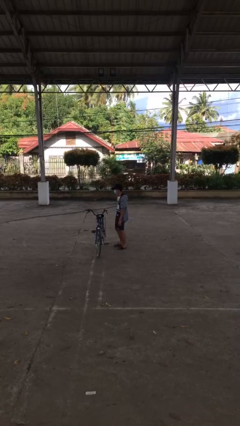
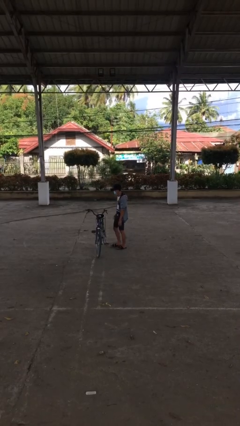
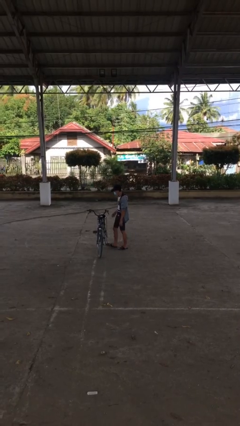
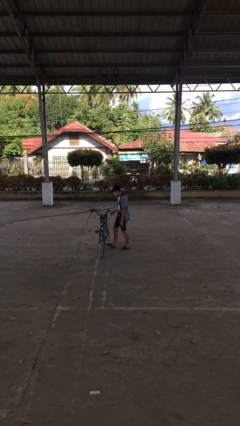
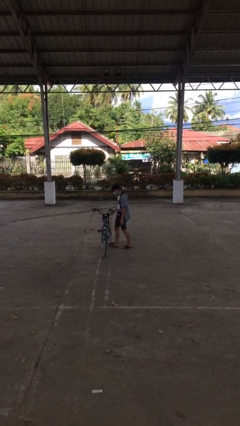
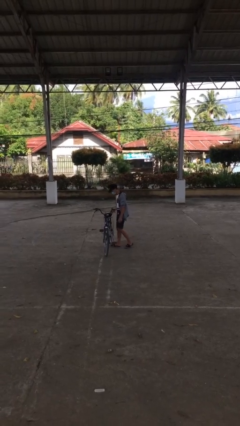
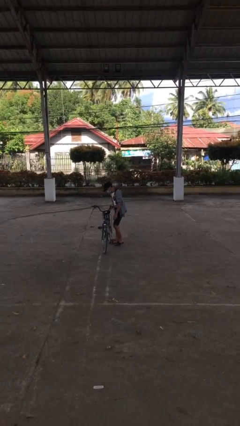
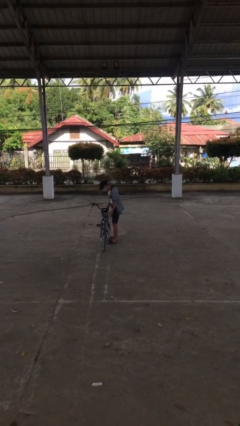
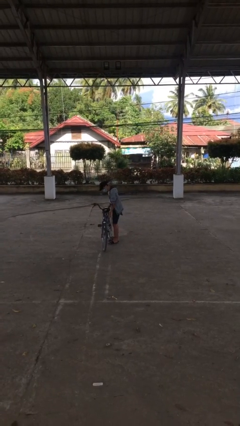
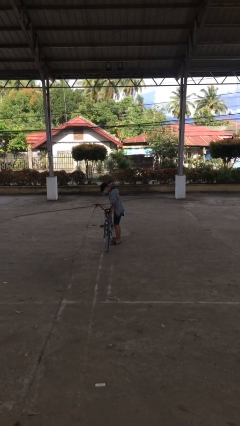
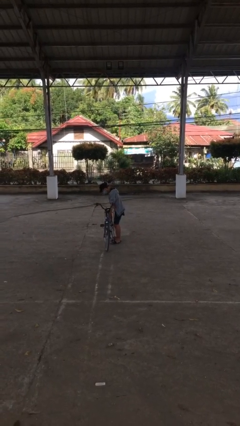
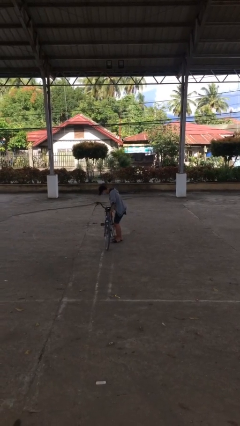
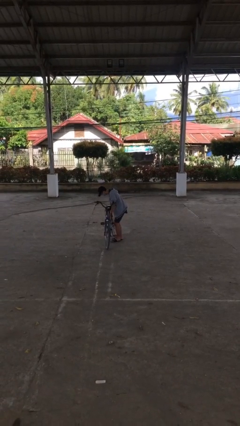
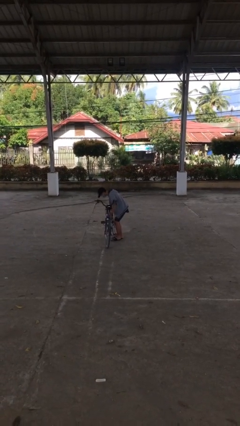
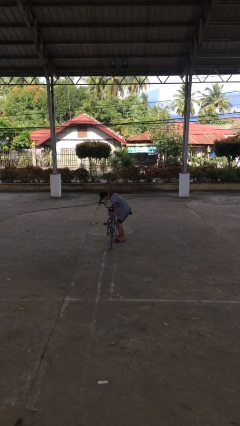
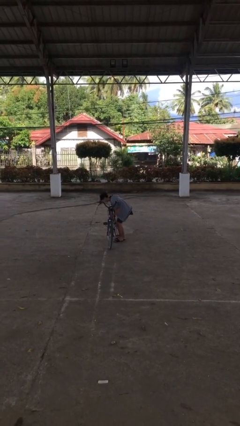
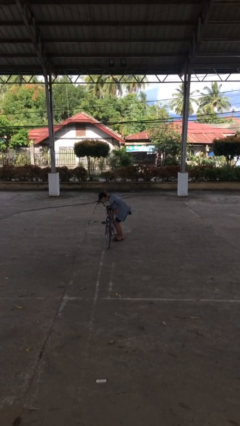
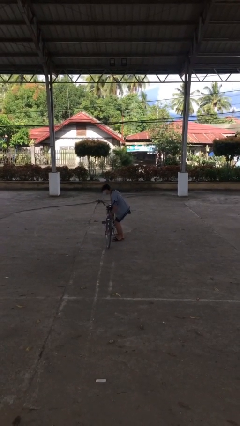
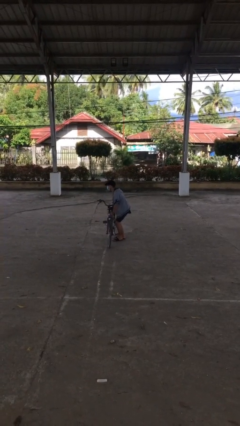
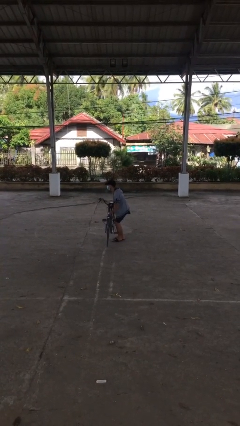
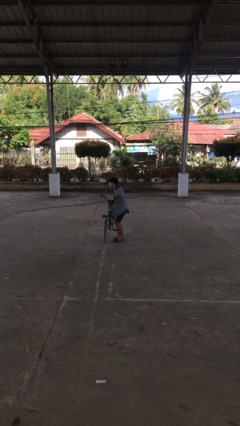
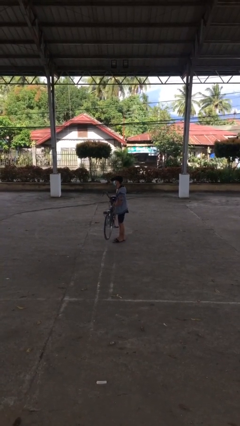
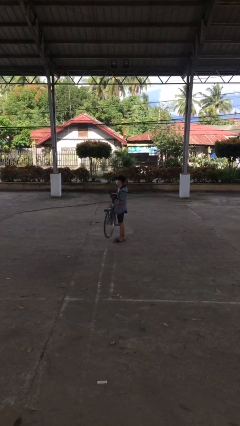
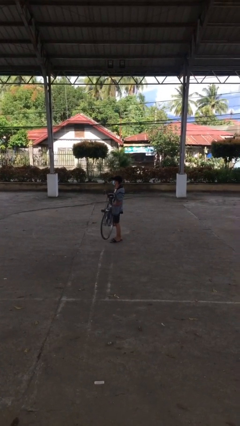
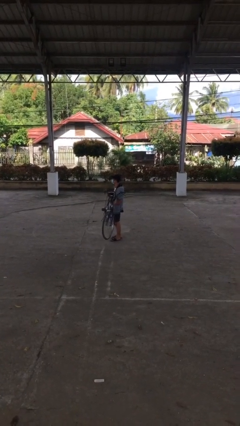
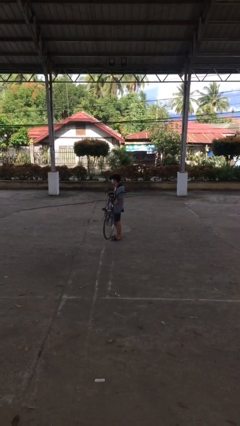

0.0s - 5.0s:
person picks up object from floor

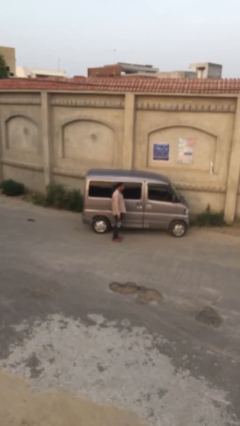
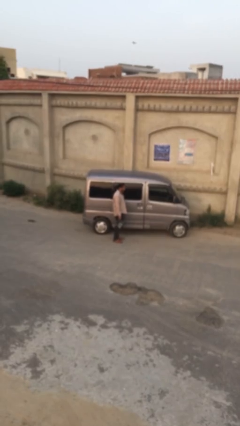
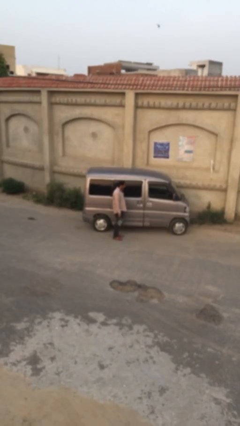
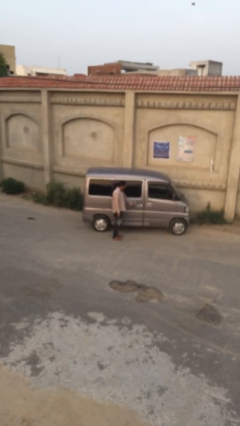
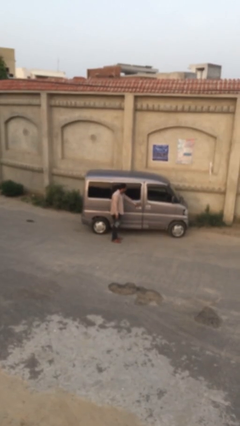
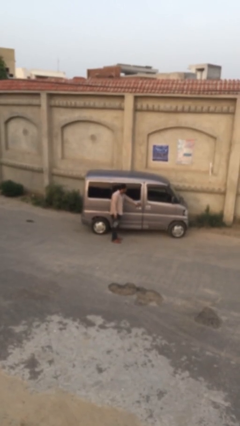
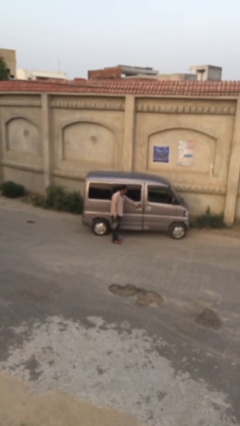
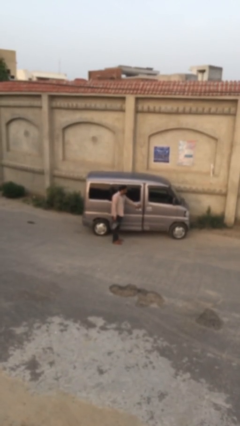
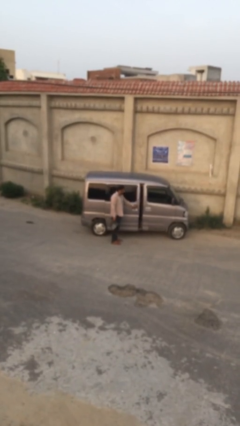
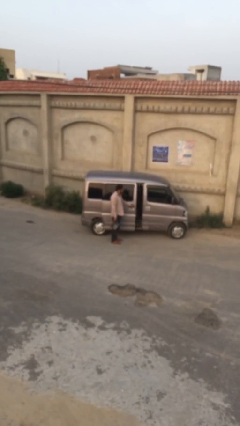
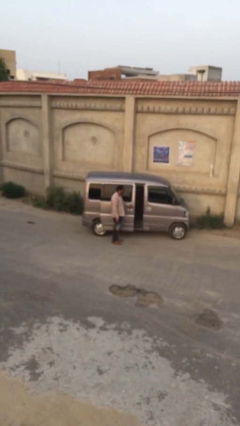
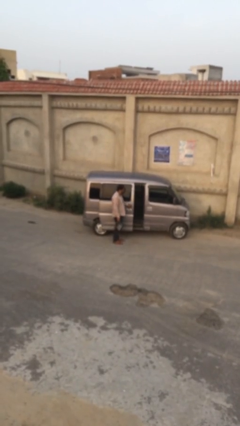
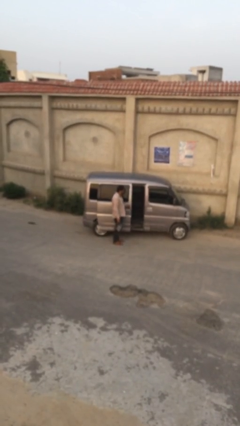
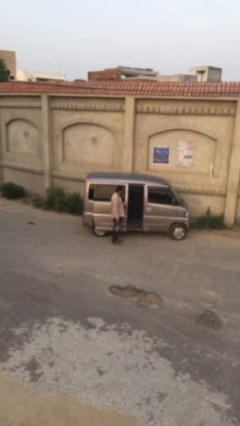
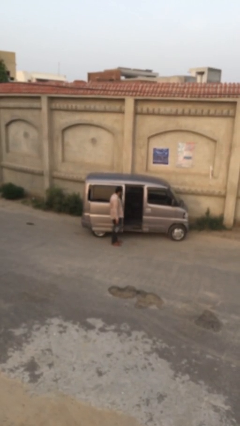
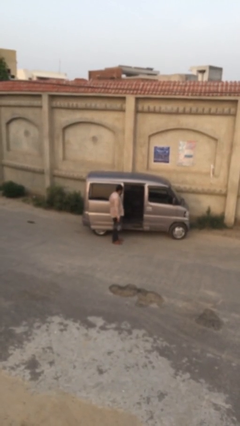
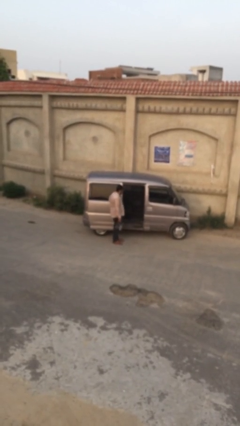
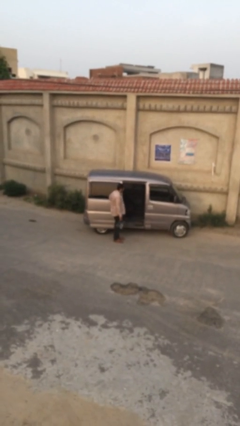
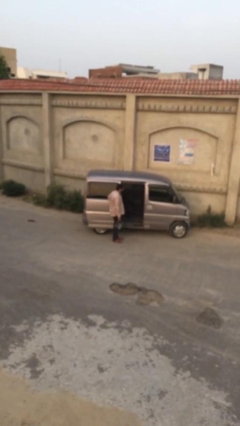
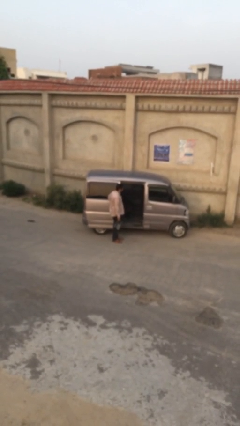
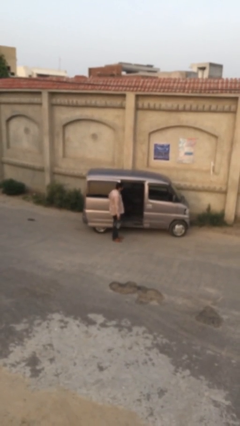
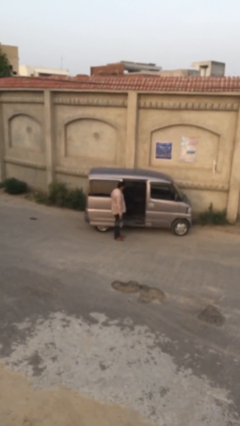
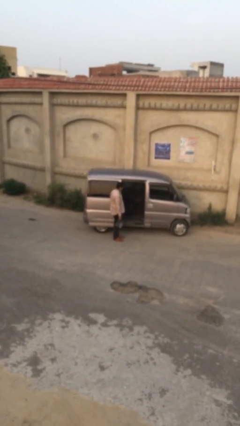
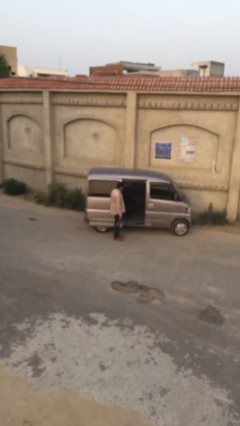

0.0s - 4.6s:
person opens car door

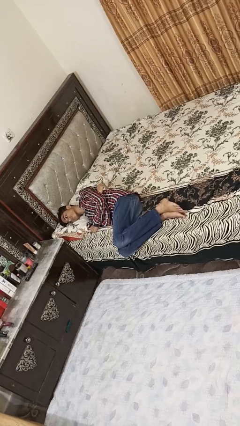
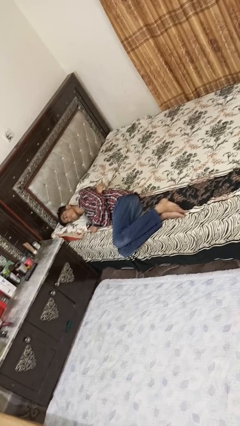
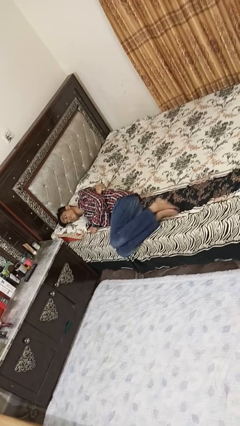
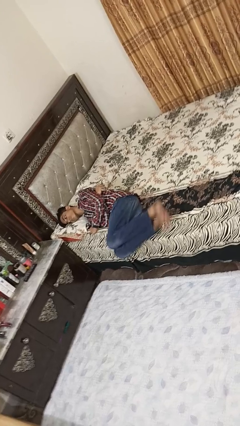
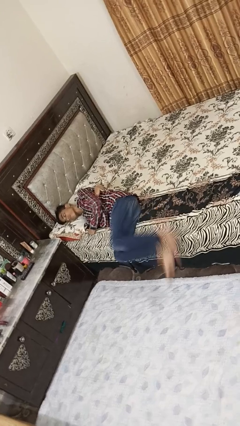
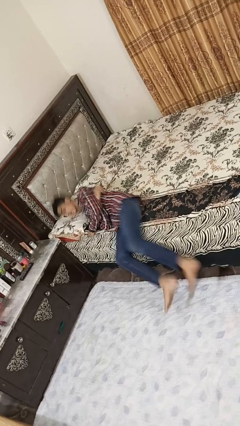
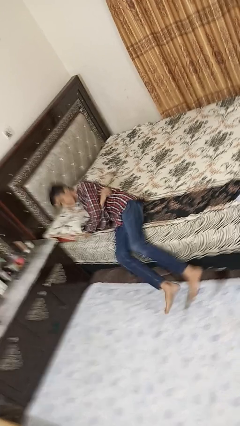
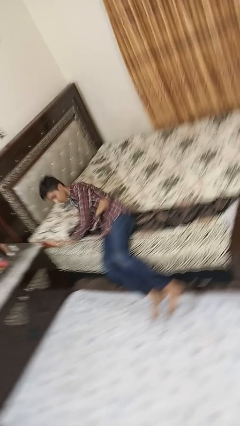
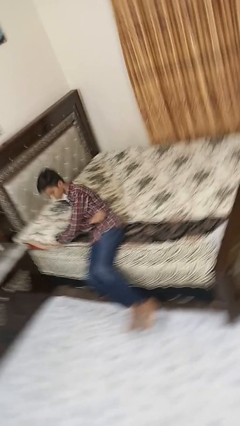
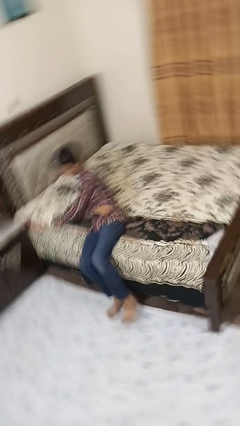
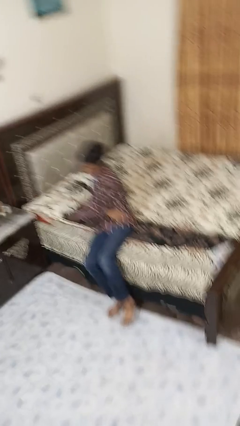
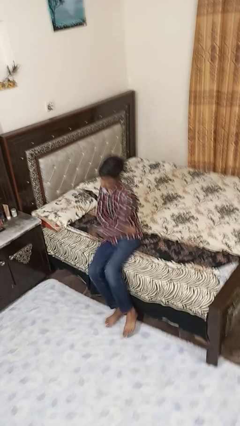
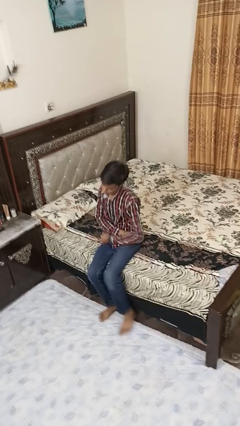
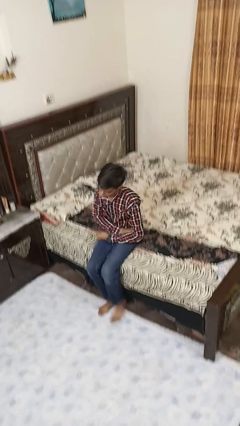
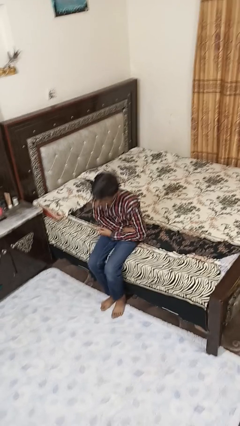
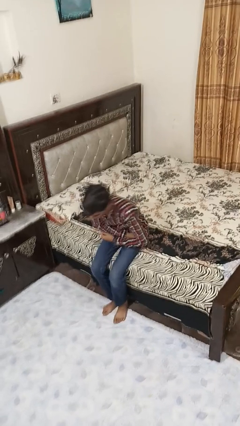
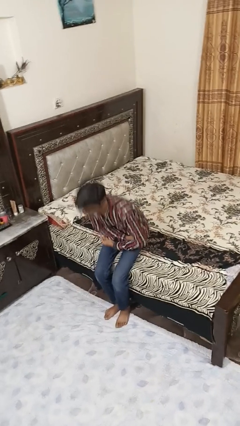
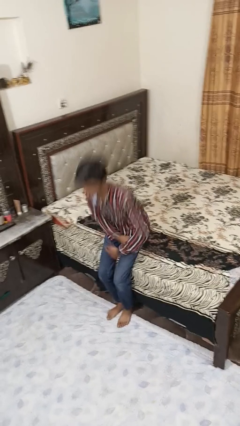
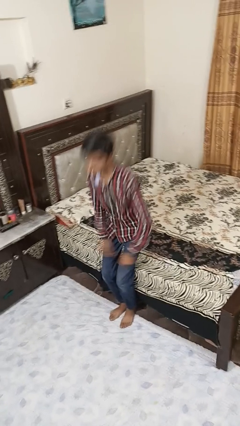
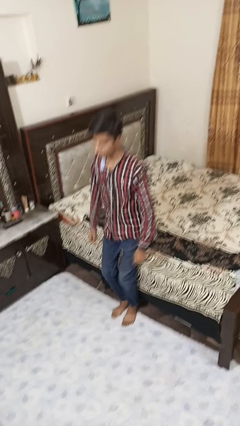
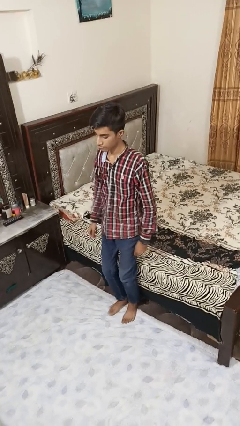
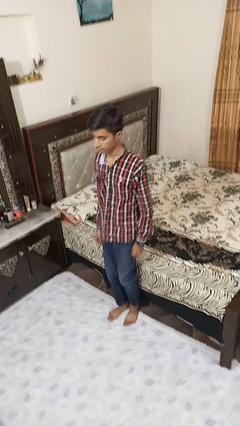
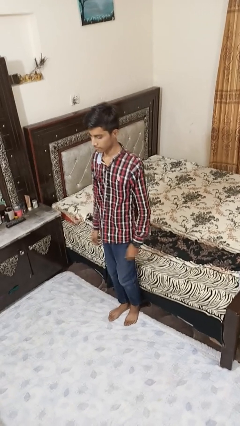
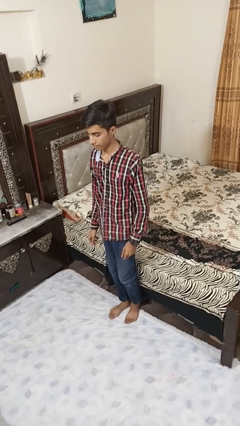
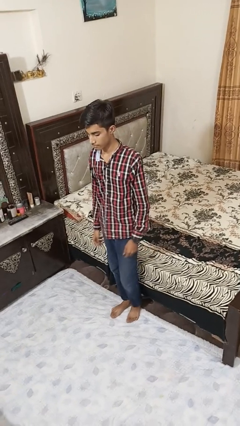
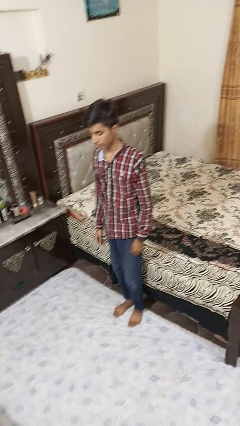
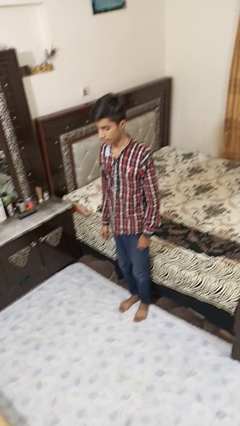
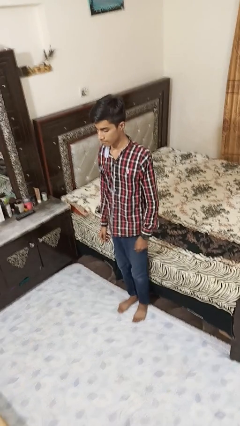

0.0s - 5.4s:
person stands up

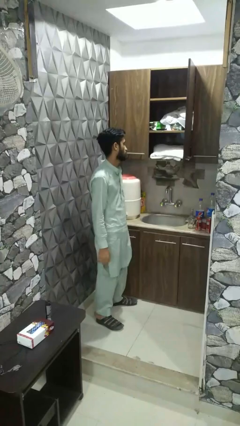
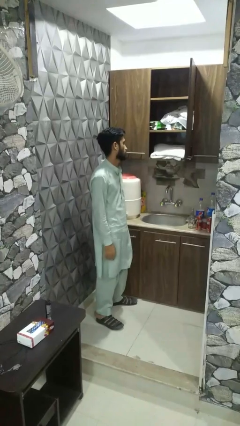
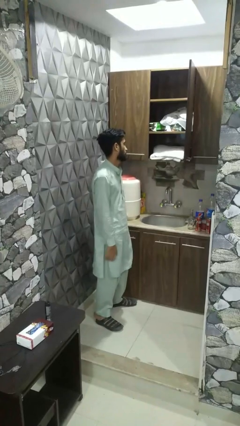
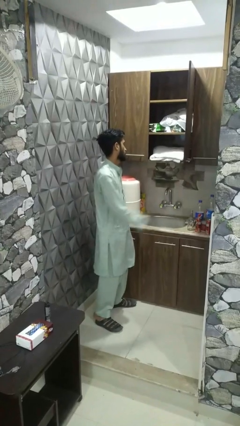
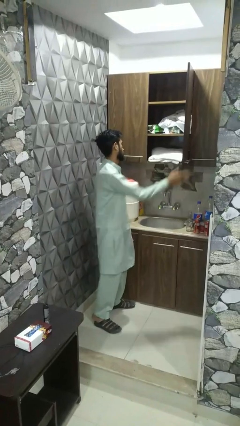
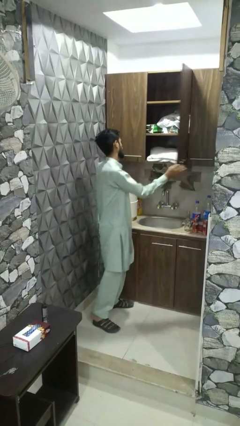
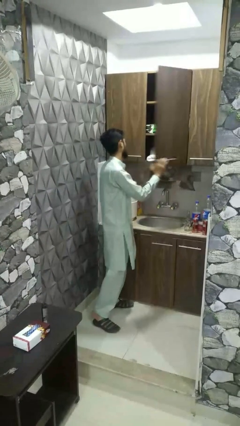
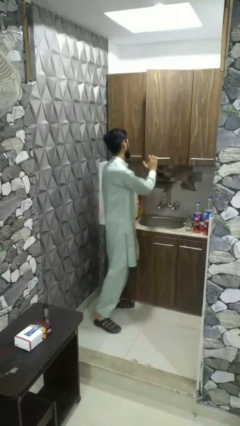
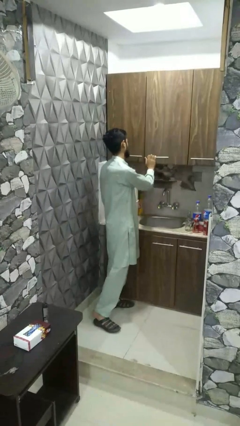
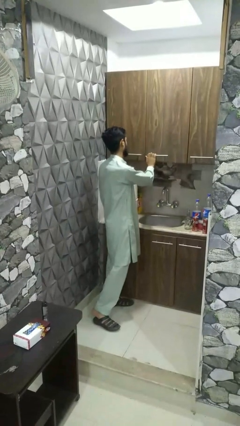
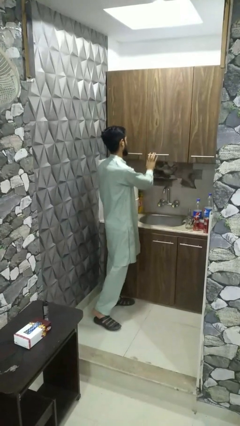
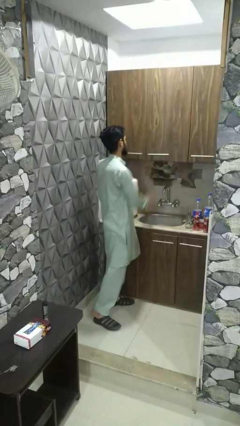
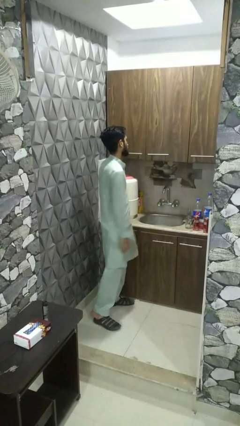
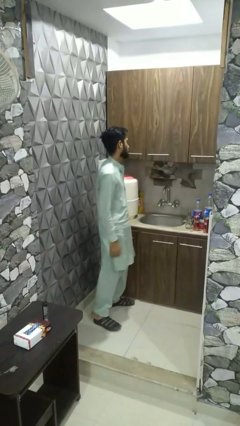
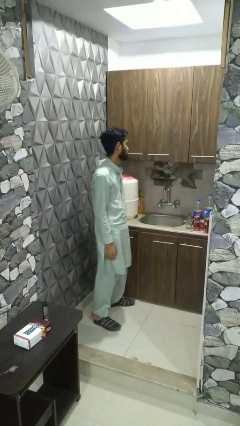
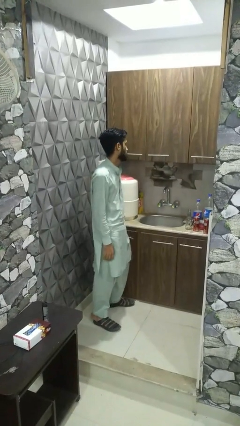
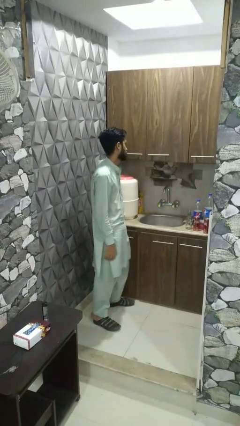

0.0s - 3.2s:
person closes dresser drawer
